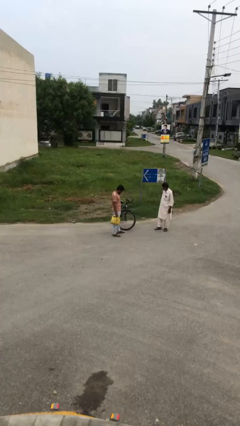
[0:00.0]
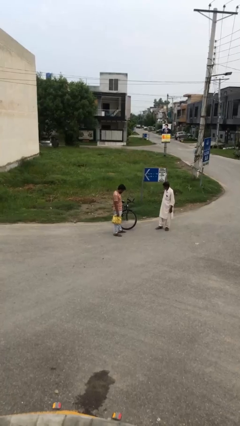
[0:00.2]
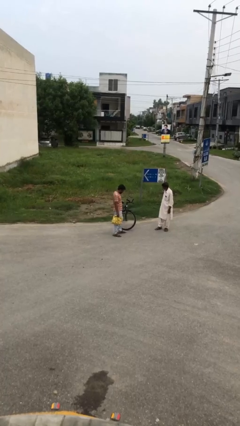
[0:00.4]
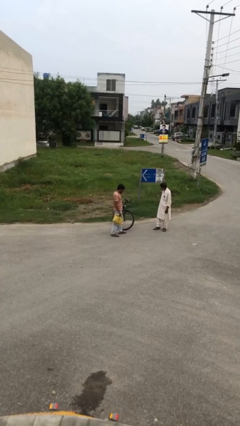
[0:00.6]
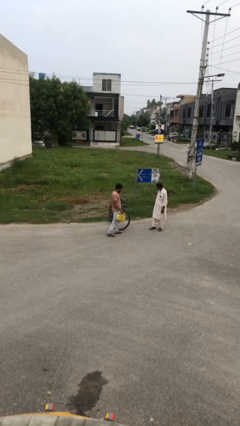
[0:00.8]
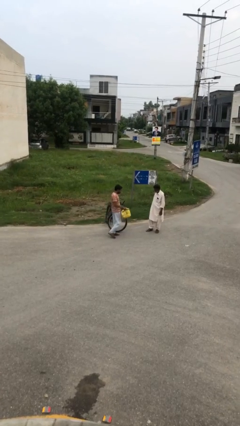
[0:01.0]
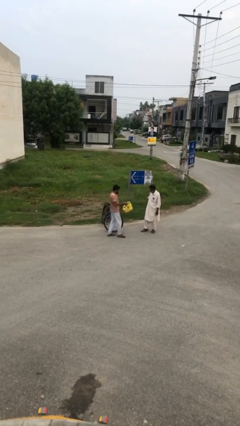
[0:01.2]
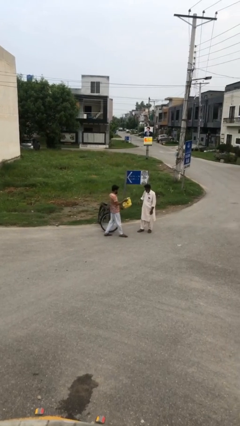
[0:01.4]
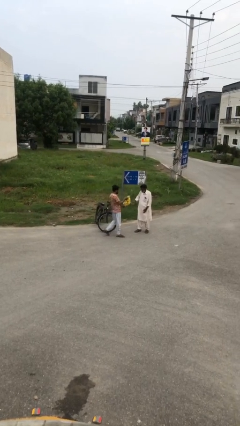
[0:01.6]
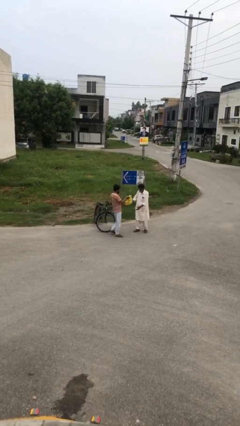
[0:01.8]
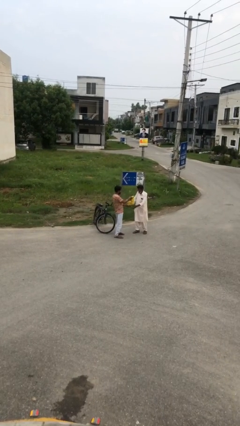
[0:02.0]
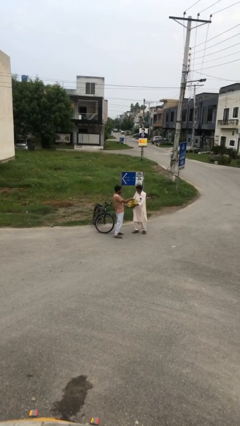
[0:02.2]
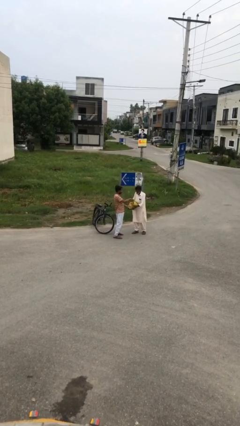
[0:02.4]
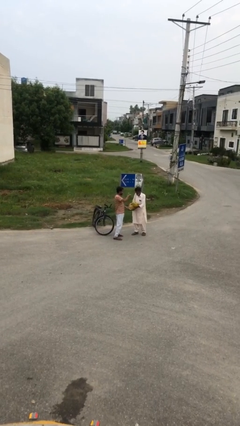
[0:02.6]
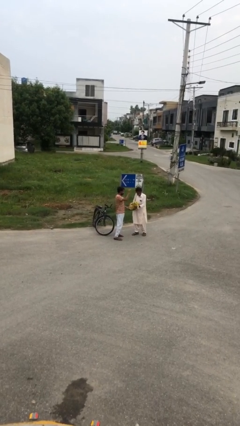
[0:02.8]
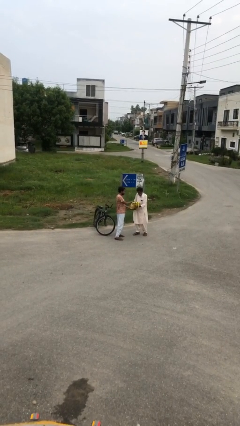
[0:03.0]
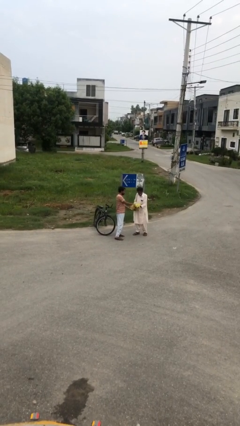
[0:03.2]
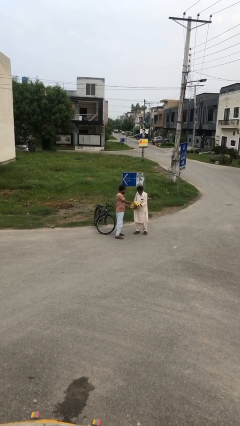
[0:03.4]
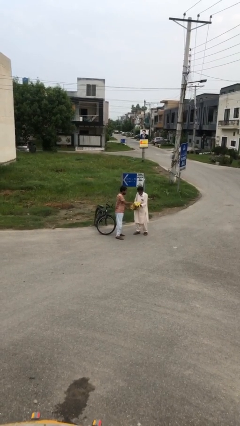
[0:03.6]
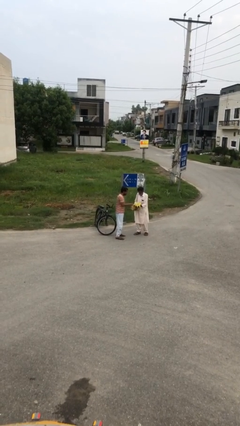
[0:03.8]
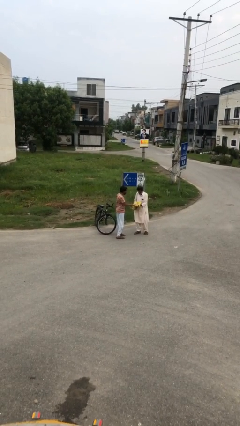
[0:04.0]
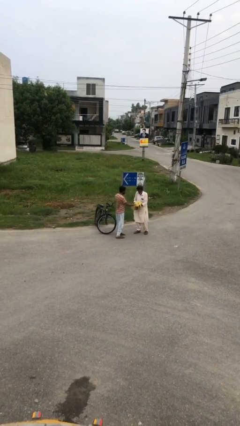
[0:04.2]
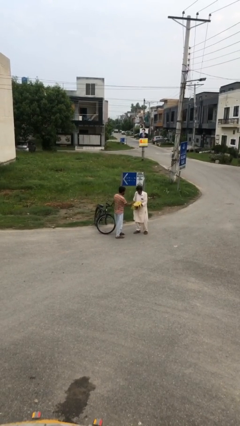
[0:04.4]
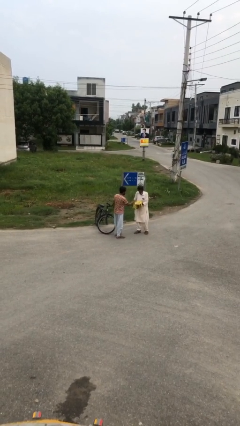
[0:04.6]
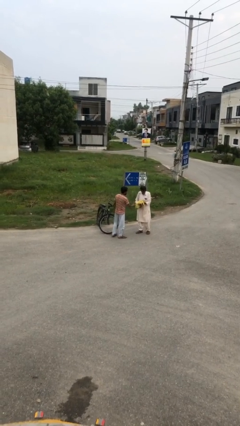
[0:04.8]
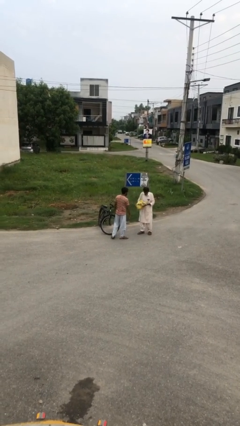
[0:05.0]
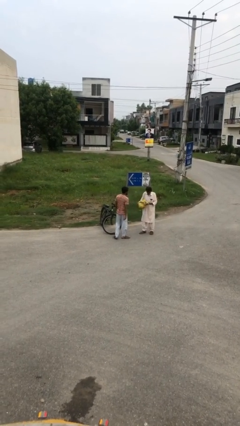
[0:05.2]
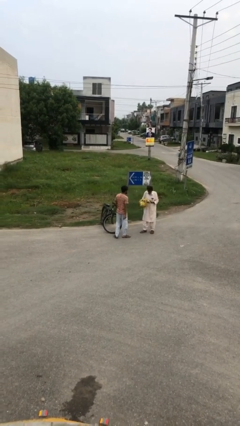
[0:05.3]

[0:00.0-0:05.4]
person transfers object to person

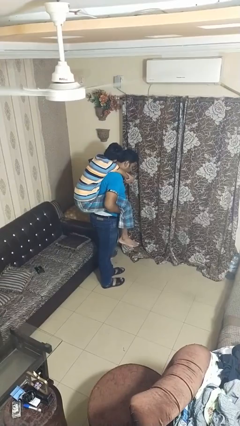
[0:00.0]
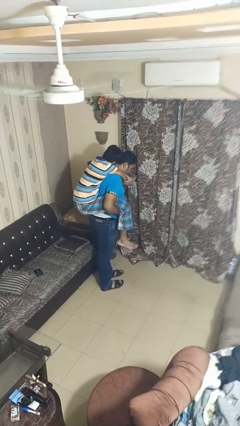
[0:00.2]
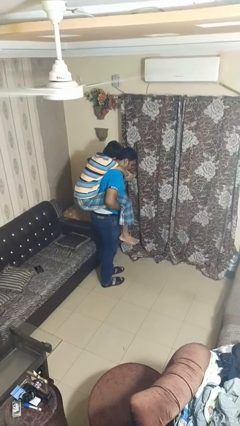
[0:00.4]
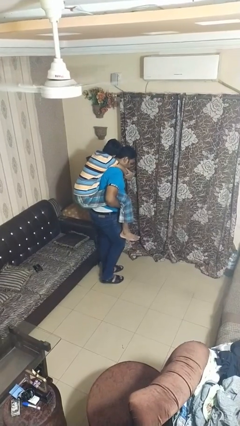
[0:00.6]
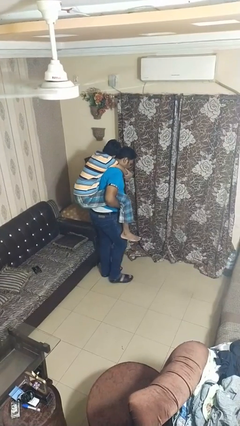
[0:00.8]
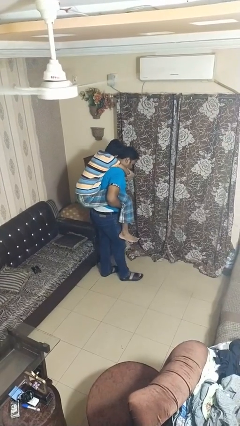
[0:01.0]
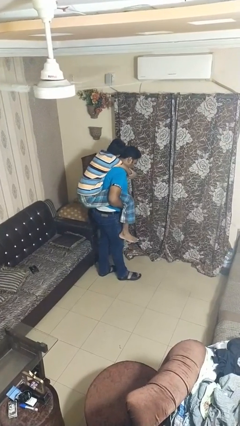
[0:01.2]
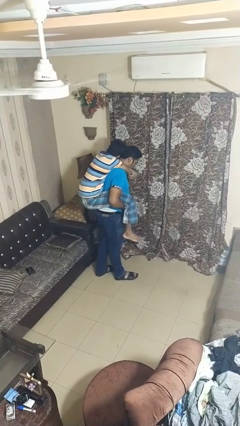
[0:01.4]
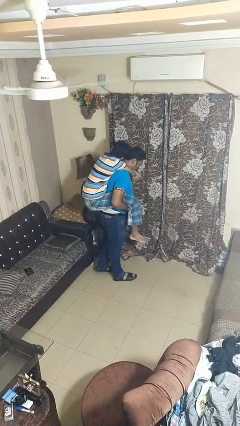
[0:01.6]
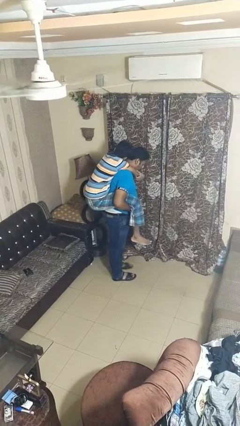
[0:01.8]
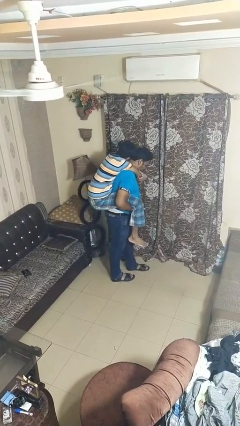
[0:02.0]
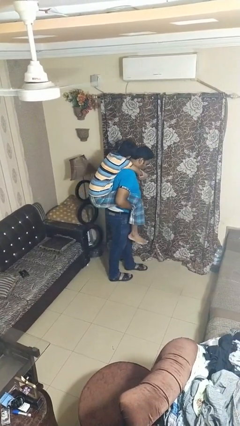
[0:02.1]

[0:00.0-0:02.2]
person carries person on back

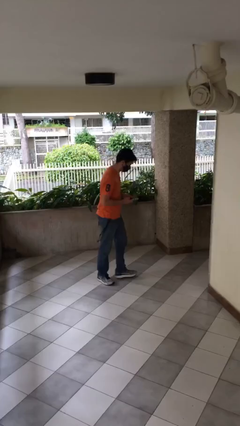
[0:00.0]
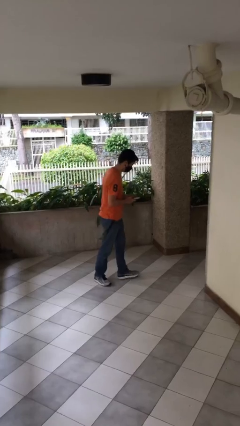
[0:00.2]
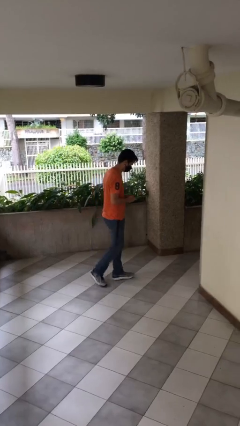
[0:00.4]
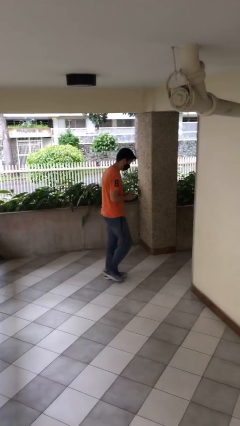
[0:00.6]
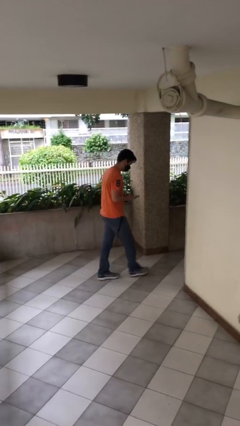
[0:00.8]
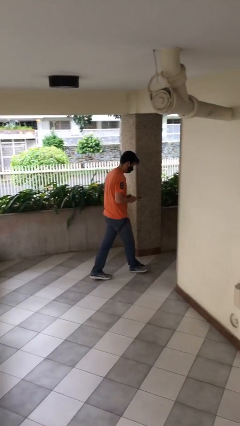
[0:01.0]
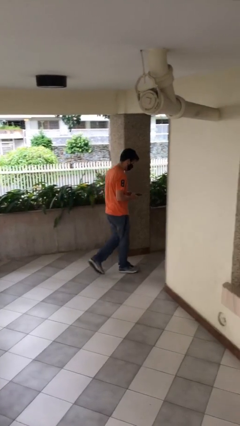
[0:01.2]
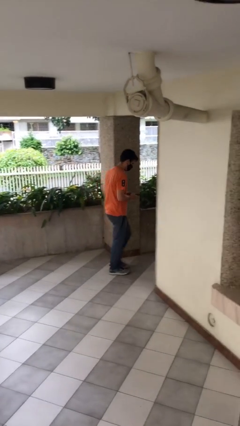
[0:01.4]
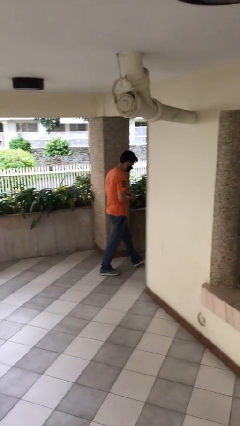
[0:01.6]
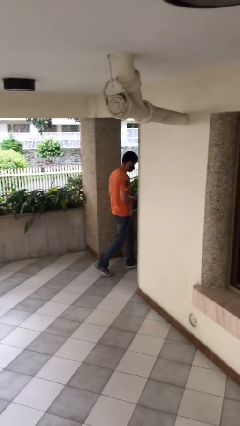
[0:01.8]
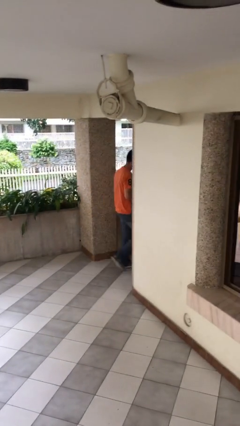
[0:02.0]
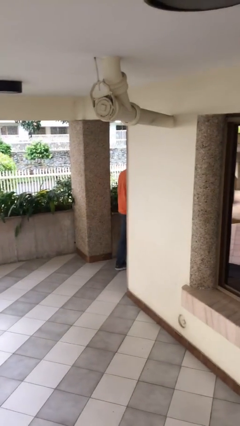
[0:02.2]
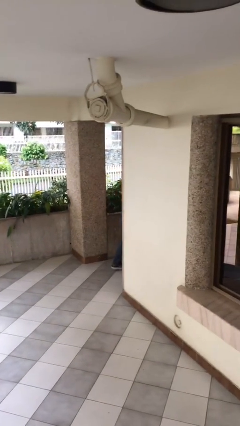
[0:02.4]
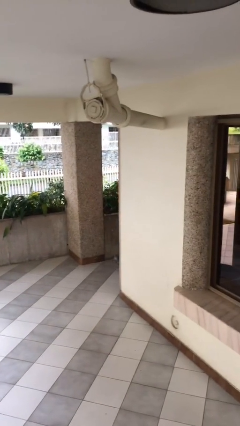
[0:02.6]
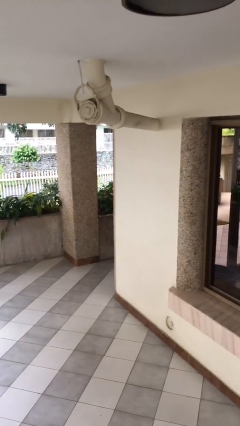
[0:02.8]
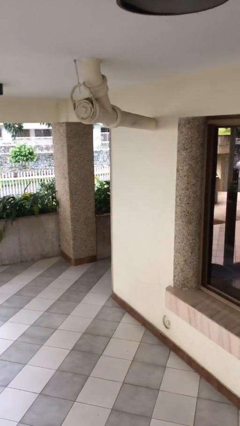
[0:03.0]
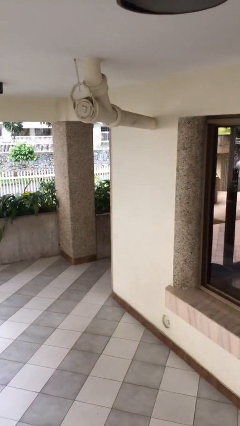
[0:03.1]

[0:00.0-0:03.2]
person exits scene through structure

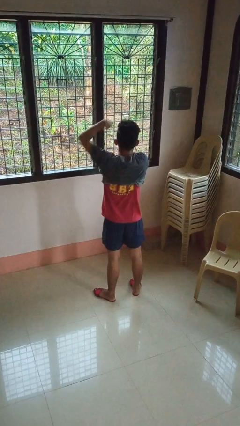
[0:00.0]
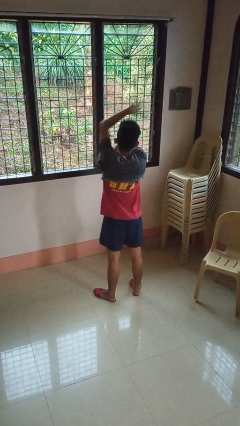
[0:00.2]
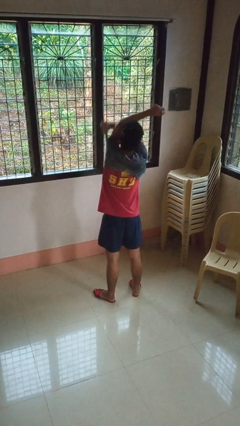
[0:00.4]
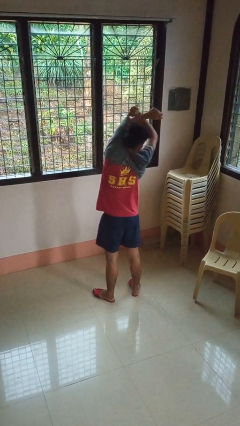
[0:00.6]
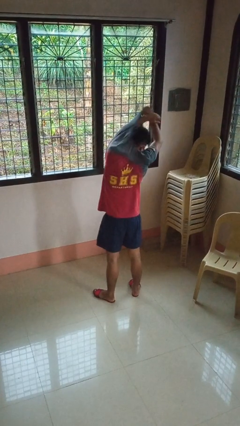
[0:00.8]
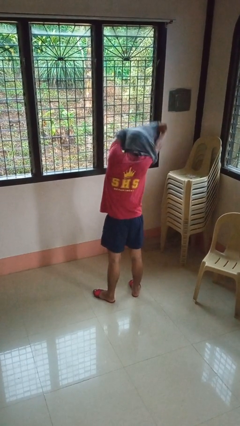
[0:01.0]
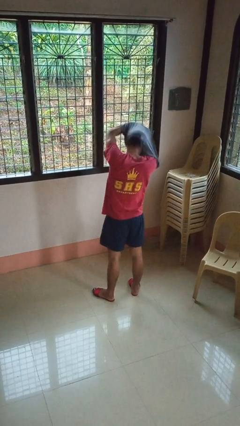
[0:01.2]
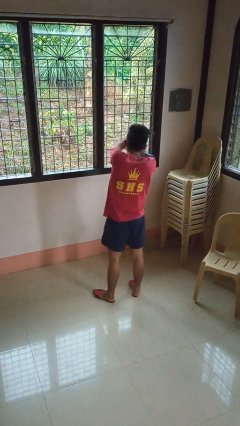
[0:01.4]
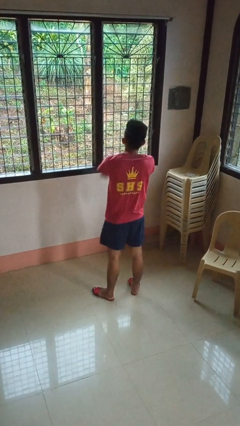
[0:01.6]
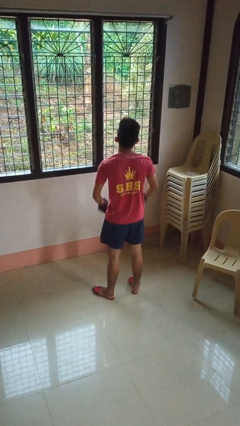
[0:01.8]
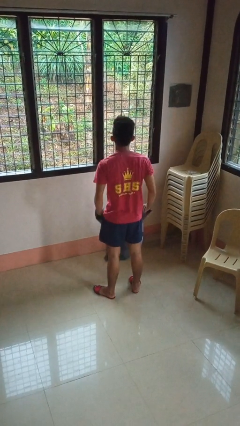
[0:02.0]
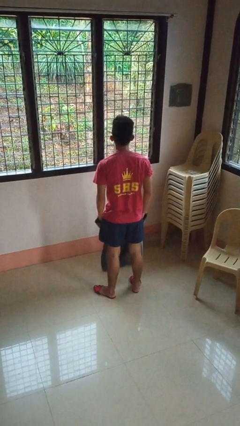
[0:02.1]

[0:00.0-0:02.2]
person takes off shirt

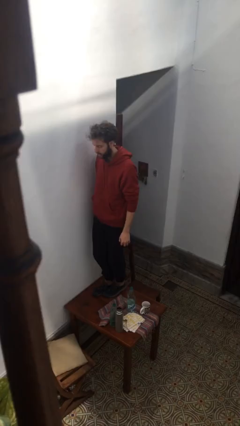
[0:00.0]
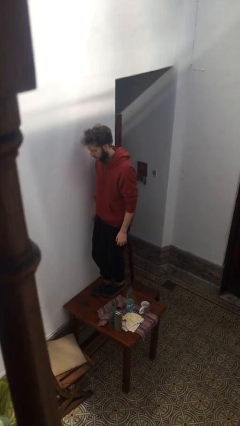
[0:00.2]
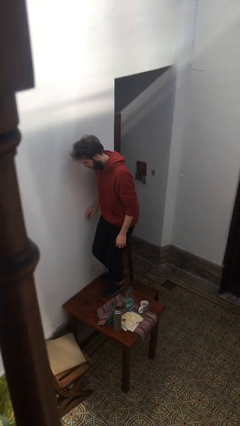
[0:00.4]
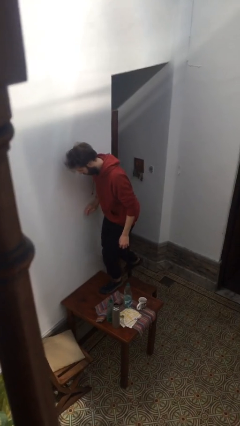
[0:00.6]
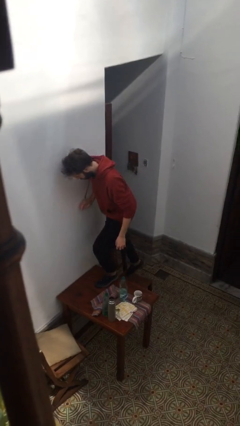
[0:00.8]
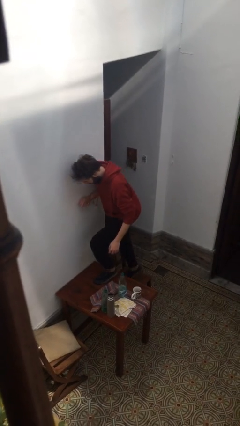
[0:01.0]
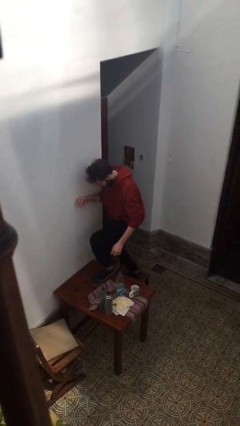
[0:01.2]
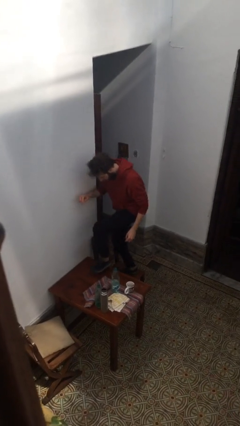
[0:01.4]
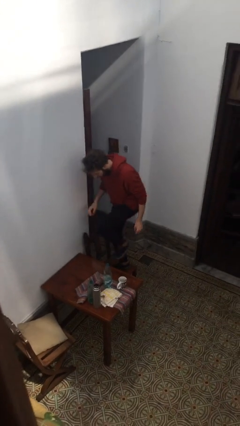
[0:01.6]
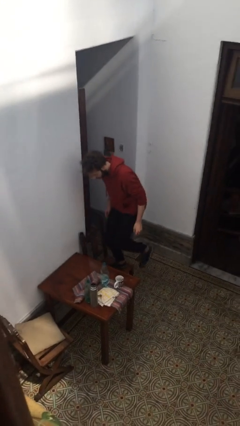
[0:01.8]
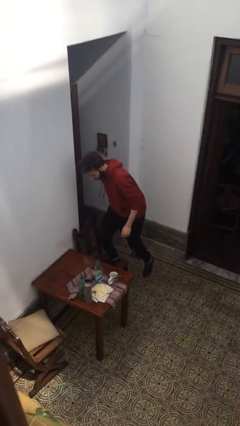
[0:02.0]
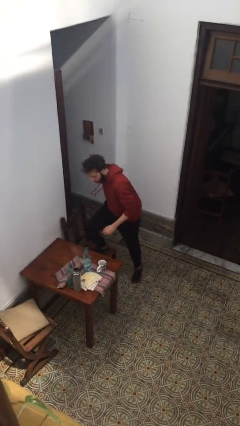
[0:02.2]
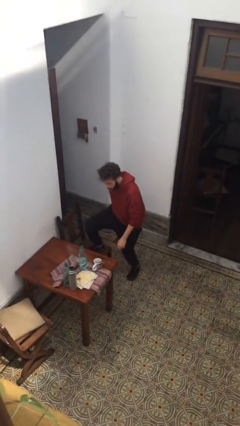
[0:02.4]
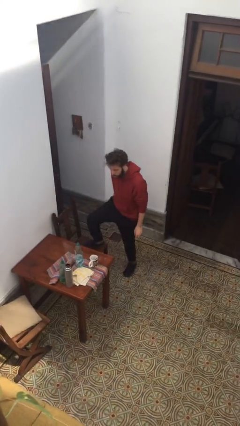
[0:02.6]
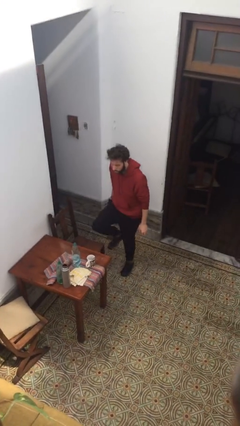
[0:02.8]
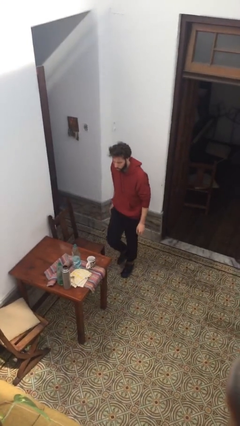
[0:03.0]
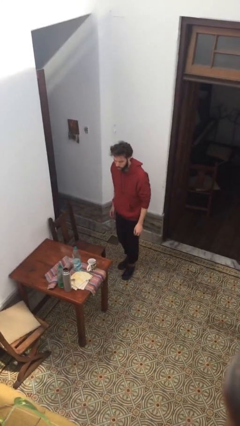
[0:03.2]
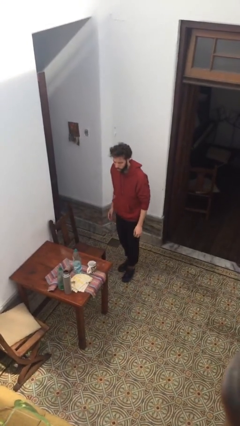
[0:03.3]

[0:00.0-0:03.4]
person climbs off table

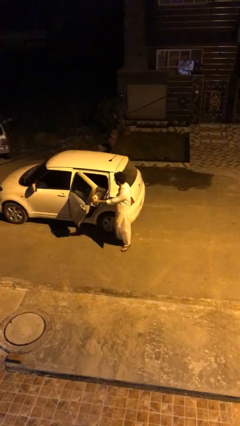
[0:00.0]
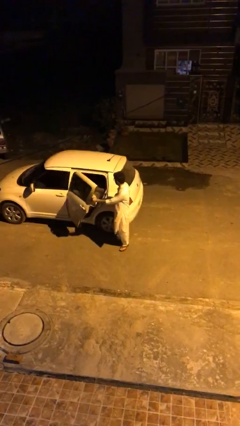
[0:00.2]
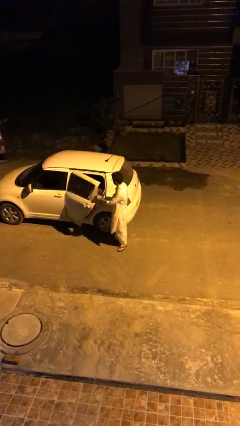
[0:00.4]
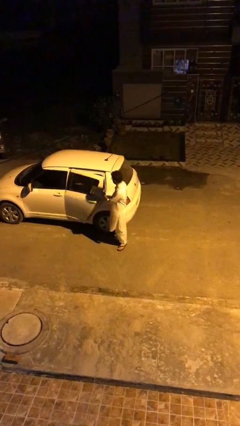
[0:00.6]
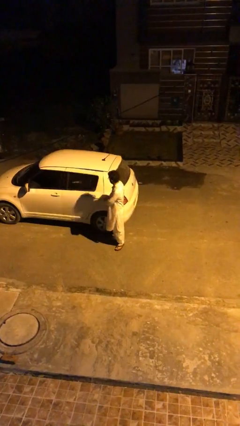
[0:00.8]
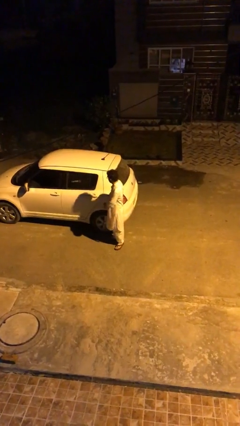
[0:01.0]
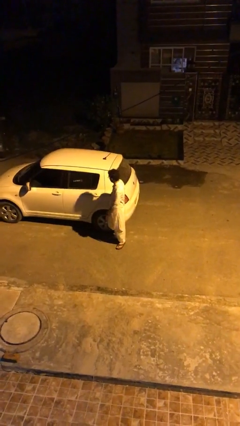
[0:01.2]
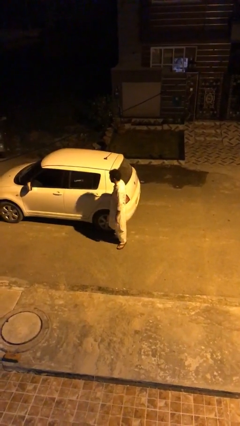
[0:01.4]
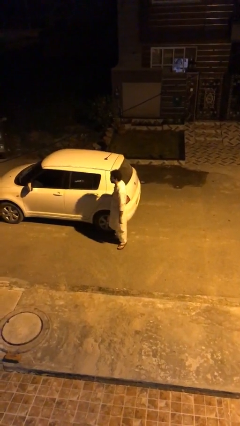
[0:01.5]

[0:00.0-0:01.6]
person closes car door
